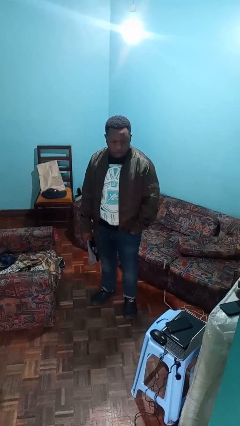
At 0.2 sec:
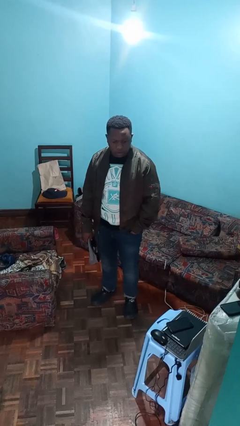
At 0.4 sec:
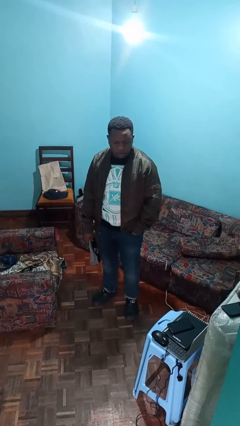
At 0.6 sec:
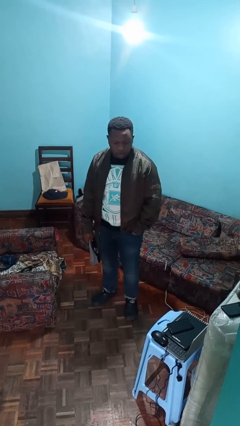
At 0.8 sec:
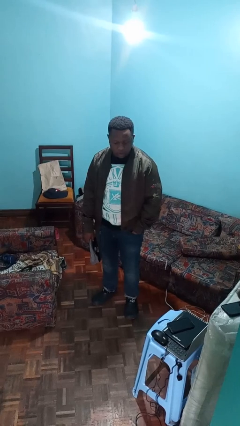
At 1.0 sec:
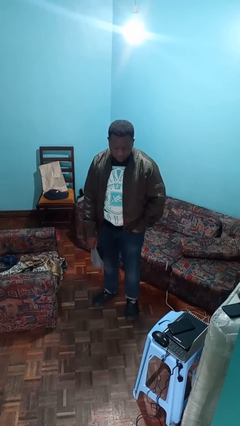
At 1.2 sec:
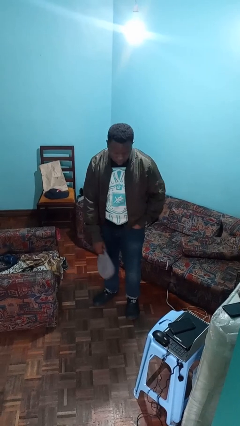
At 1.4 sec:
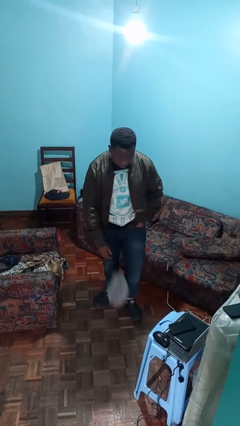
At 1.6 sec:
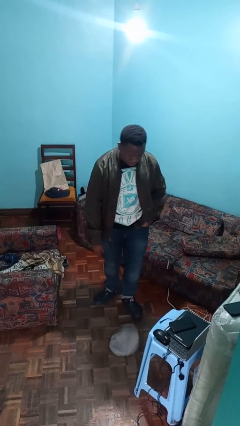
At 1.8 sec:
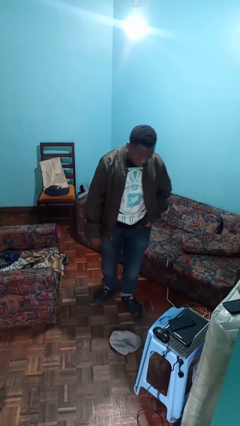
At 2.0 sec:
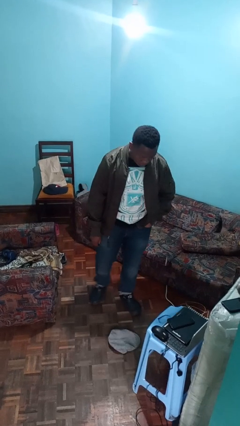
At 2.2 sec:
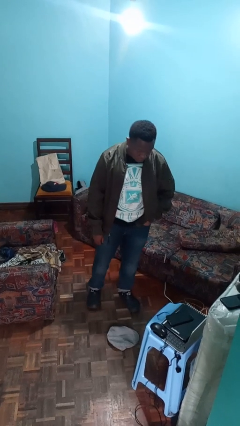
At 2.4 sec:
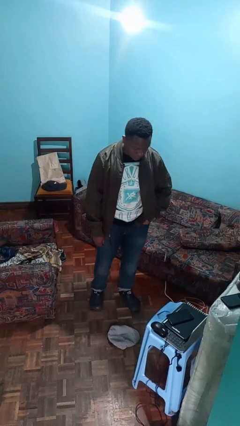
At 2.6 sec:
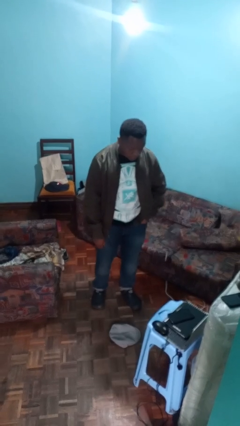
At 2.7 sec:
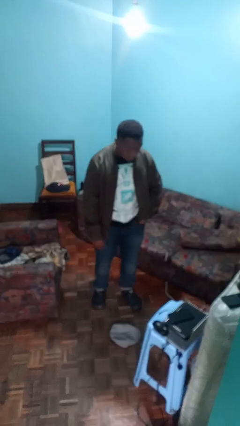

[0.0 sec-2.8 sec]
person drops object

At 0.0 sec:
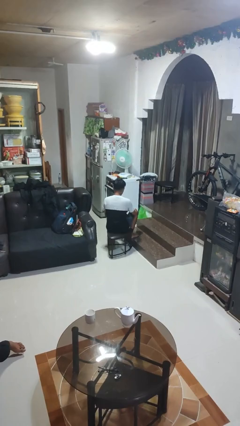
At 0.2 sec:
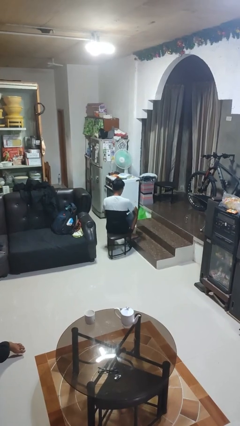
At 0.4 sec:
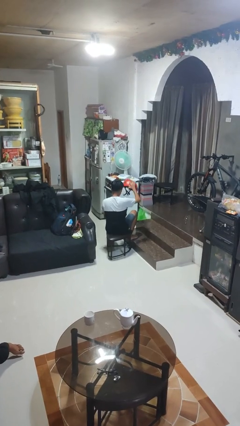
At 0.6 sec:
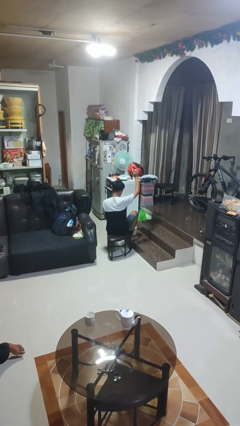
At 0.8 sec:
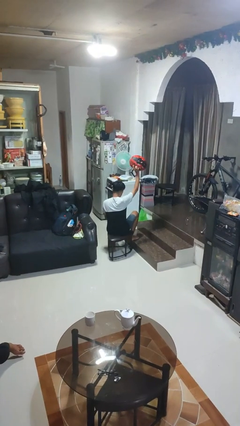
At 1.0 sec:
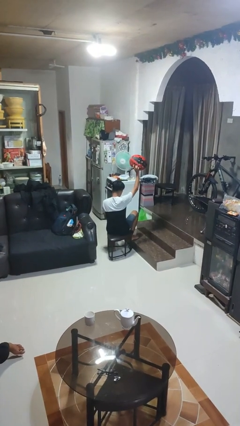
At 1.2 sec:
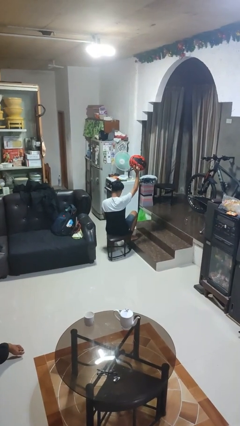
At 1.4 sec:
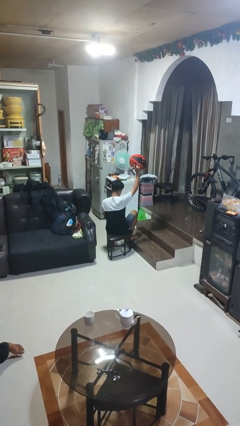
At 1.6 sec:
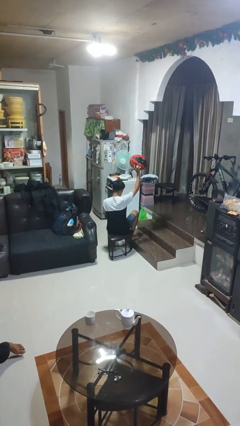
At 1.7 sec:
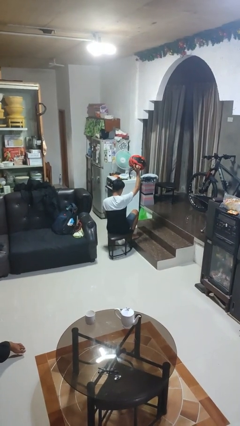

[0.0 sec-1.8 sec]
person holds object above head

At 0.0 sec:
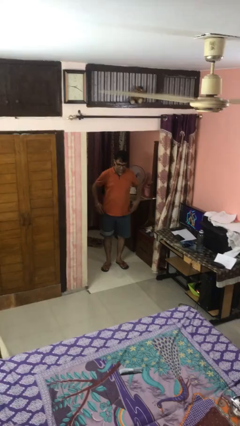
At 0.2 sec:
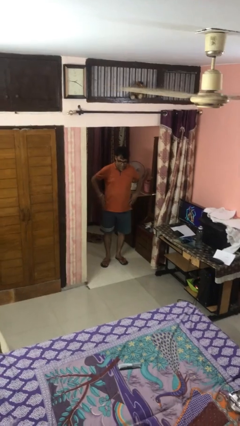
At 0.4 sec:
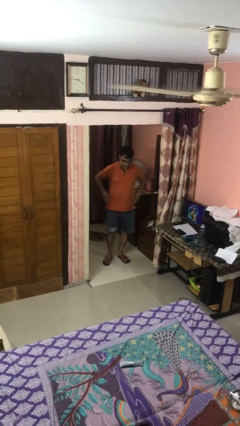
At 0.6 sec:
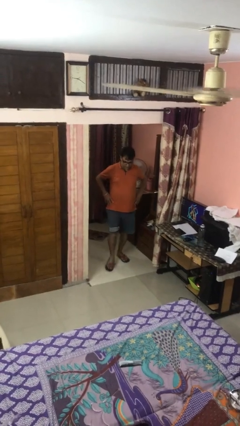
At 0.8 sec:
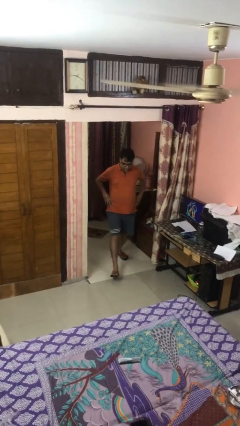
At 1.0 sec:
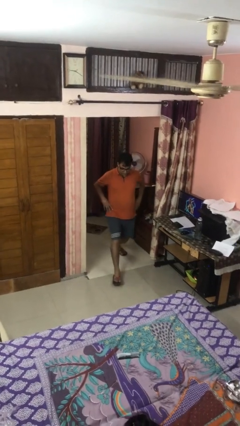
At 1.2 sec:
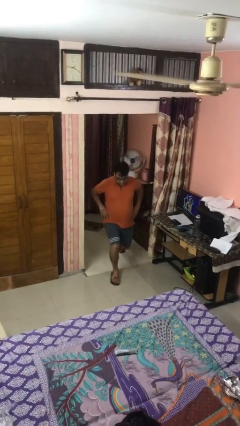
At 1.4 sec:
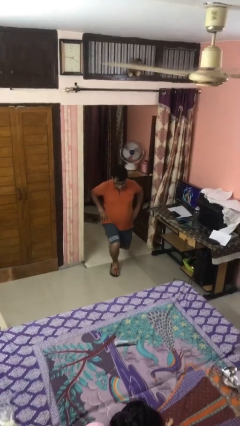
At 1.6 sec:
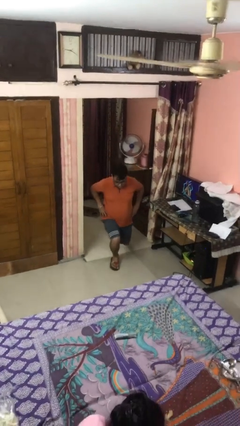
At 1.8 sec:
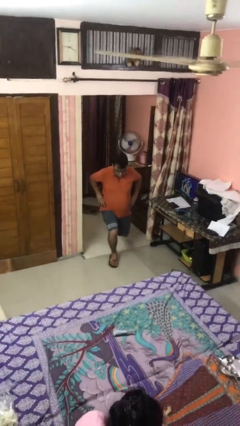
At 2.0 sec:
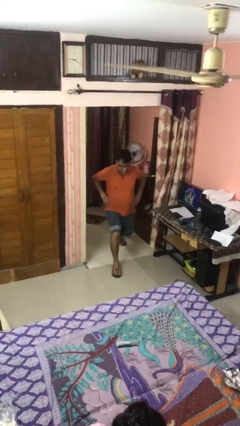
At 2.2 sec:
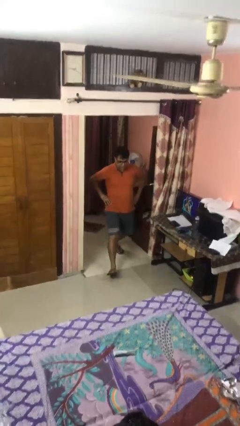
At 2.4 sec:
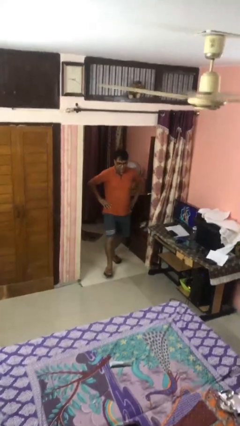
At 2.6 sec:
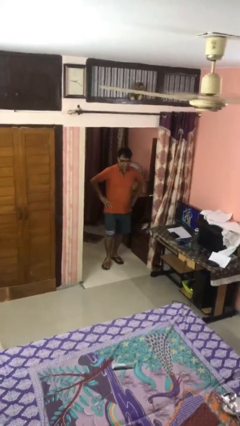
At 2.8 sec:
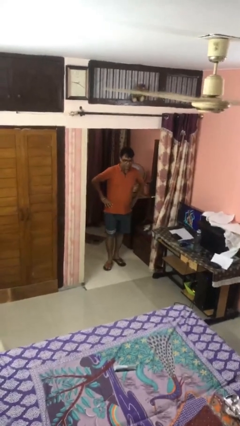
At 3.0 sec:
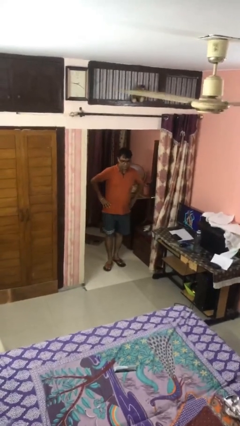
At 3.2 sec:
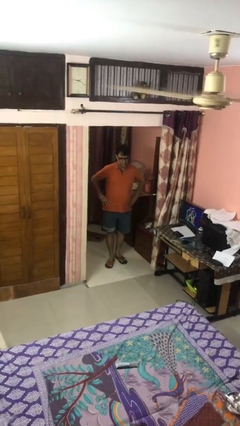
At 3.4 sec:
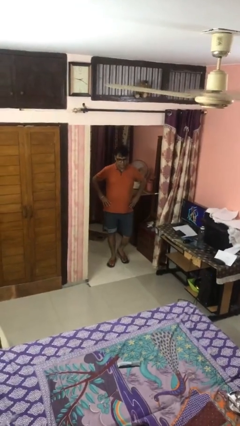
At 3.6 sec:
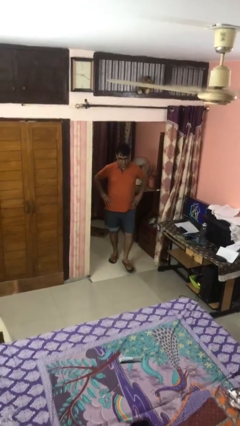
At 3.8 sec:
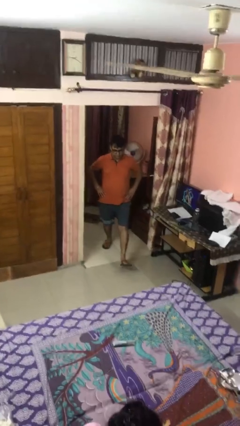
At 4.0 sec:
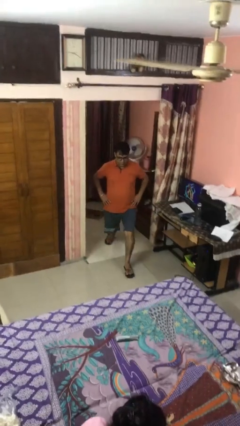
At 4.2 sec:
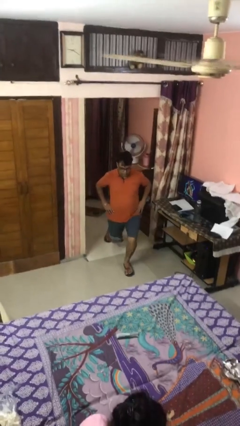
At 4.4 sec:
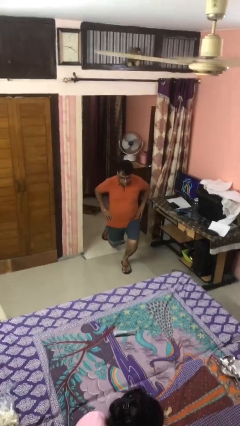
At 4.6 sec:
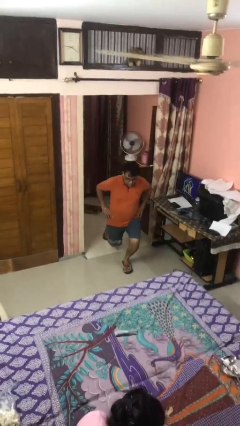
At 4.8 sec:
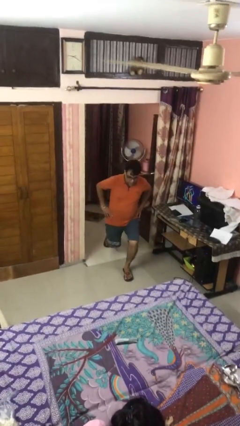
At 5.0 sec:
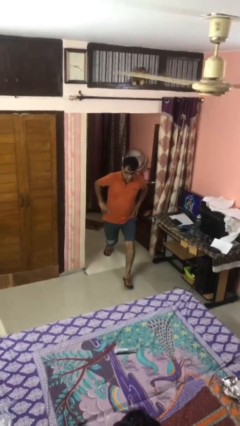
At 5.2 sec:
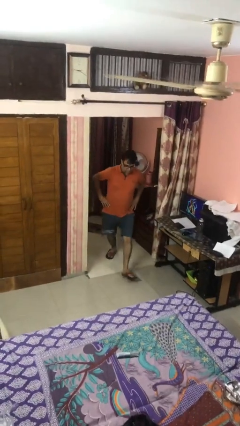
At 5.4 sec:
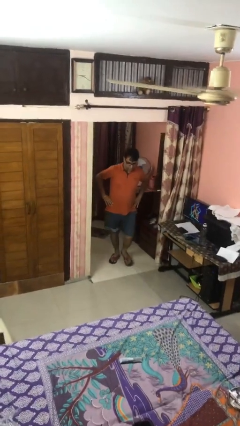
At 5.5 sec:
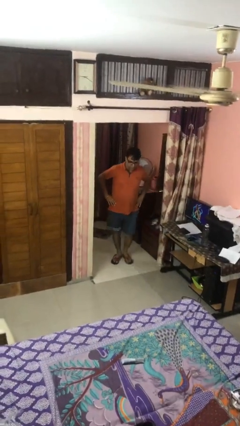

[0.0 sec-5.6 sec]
person exercises with lunges

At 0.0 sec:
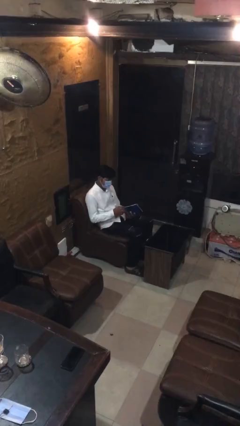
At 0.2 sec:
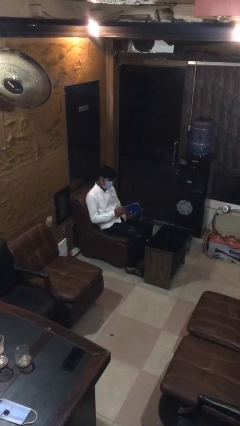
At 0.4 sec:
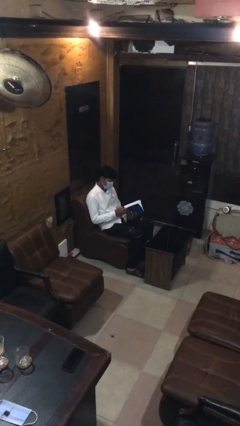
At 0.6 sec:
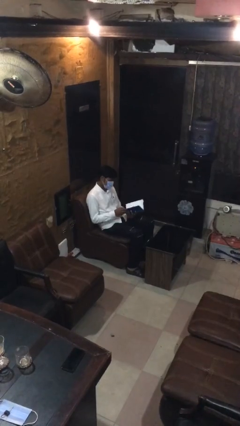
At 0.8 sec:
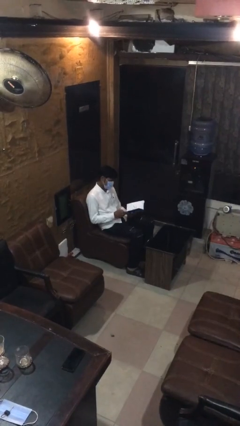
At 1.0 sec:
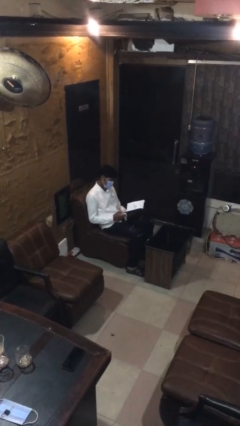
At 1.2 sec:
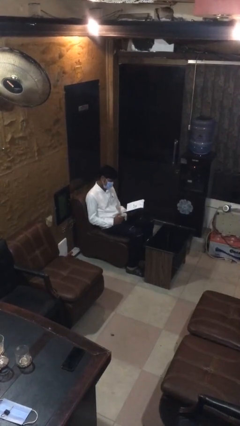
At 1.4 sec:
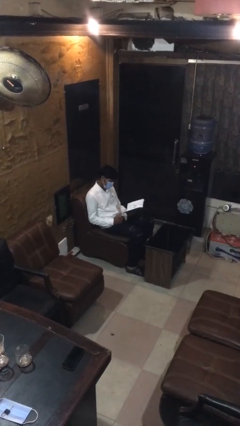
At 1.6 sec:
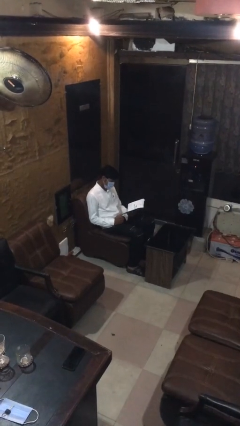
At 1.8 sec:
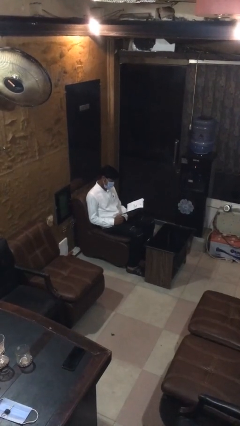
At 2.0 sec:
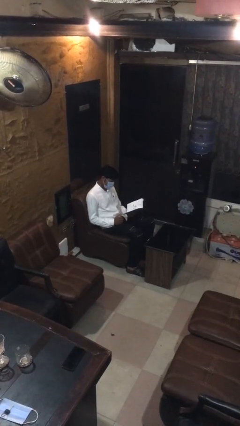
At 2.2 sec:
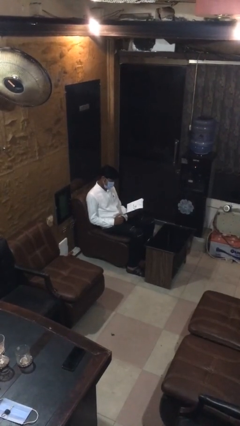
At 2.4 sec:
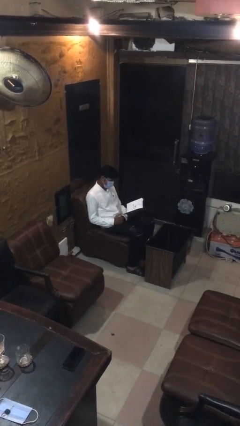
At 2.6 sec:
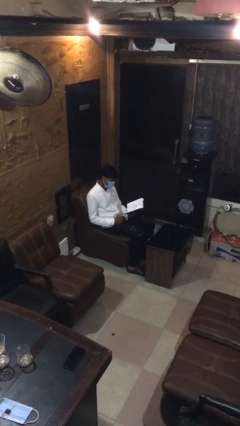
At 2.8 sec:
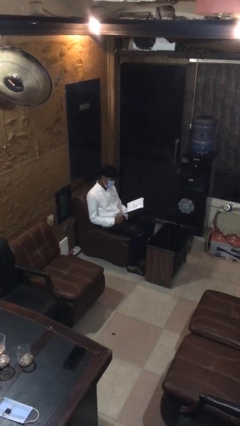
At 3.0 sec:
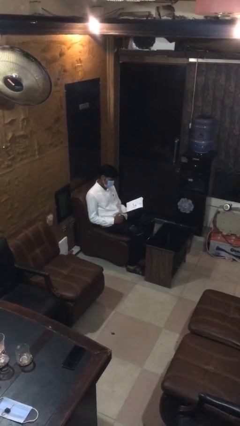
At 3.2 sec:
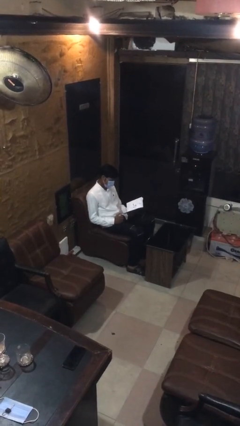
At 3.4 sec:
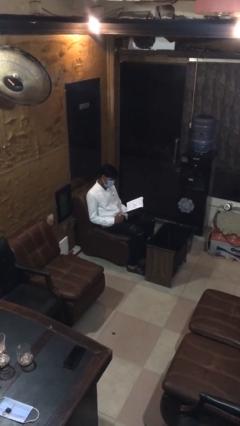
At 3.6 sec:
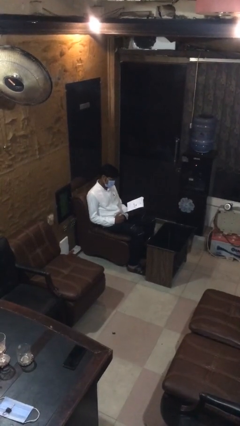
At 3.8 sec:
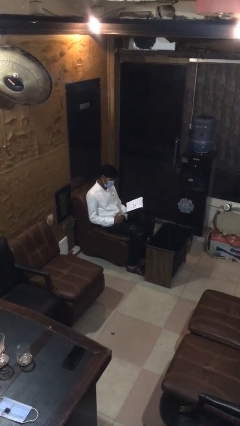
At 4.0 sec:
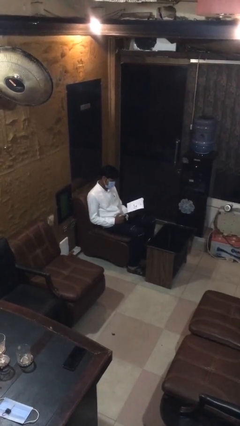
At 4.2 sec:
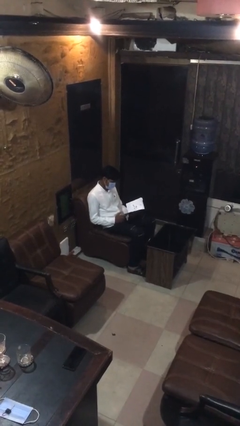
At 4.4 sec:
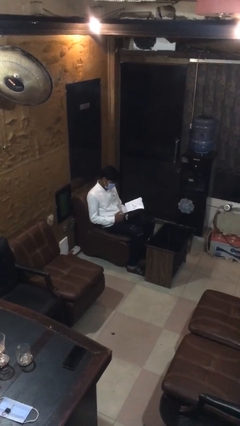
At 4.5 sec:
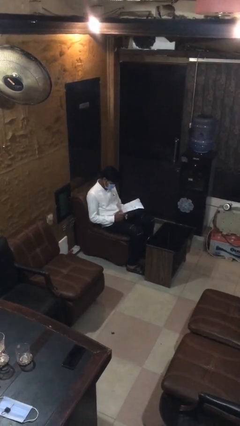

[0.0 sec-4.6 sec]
person reads document

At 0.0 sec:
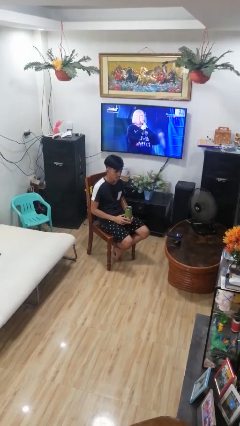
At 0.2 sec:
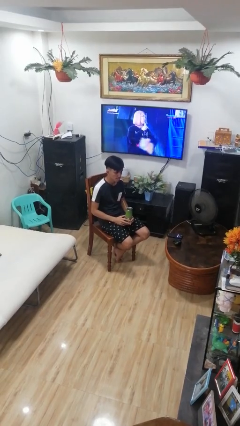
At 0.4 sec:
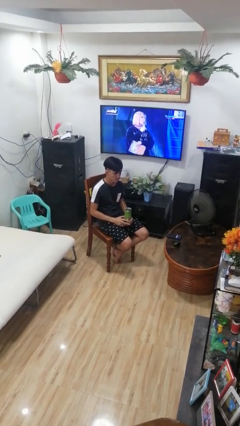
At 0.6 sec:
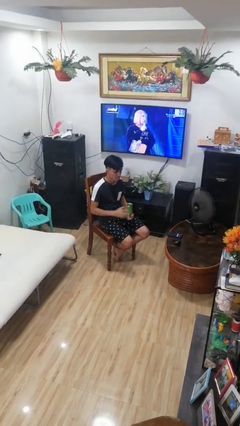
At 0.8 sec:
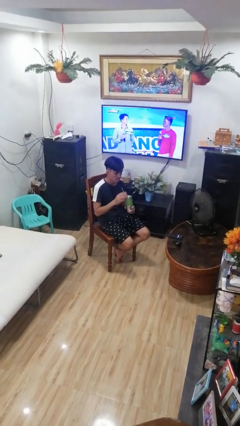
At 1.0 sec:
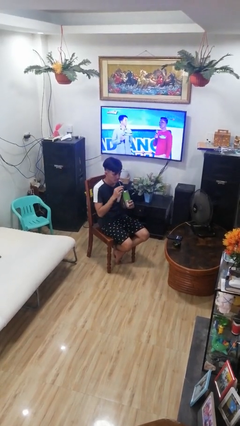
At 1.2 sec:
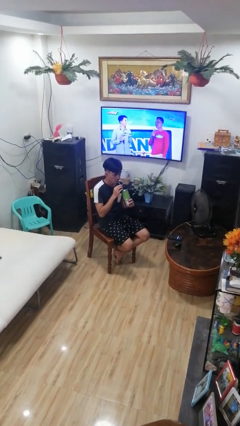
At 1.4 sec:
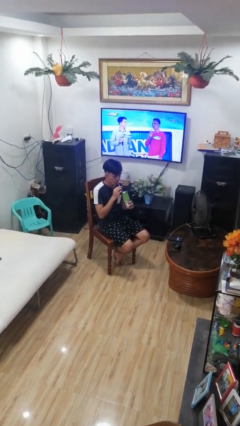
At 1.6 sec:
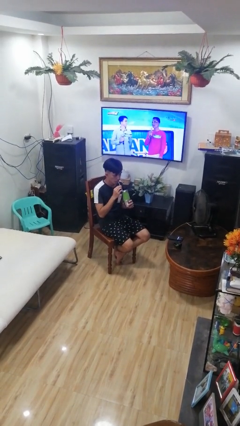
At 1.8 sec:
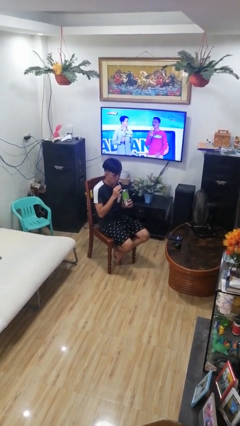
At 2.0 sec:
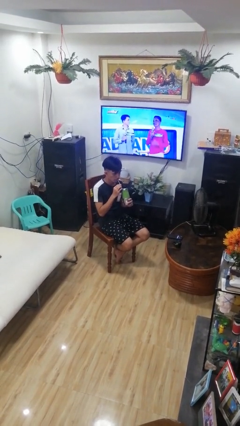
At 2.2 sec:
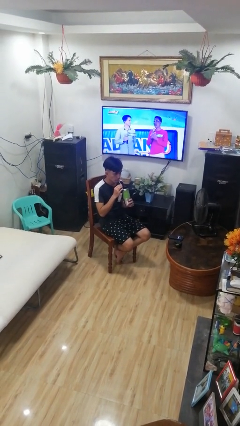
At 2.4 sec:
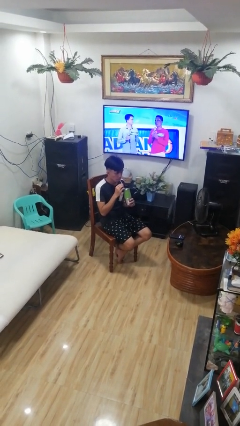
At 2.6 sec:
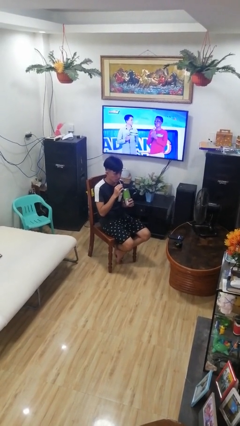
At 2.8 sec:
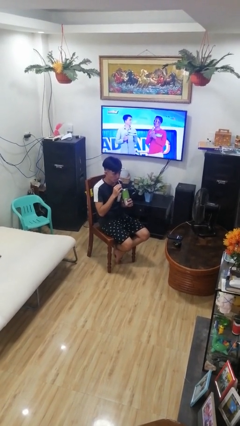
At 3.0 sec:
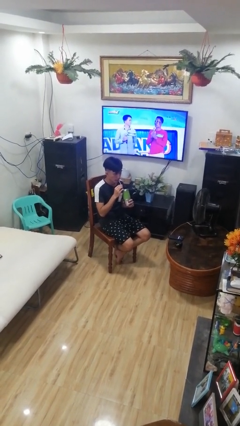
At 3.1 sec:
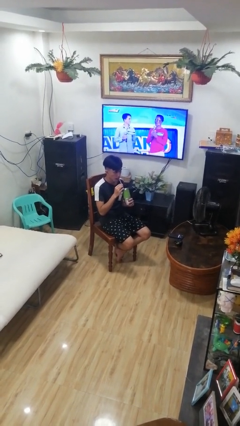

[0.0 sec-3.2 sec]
person drinks from straw
